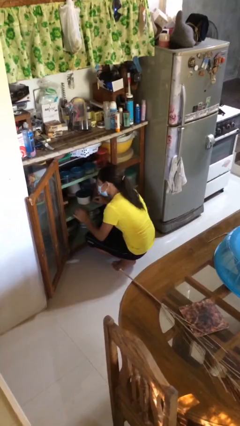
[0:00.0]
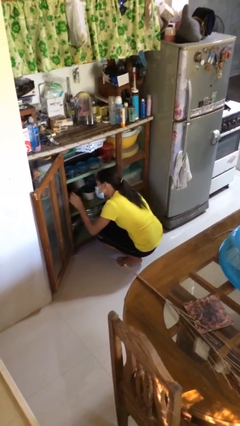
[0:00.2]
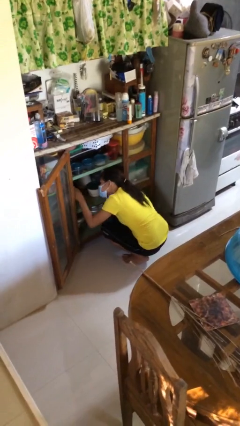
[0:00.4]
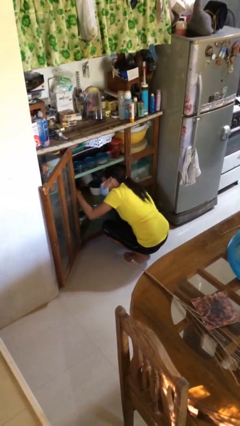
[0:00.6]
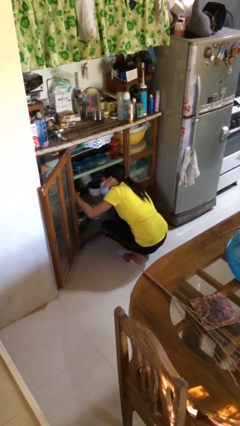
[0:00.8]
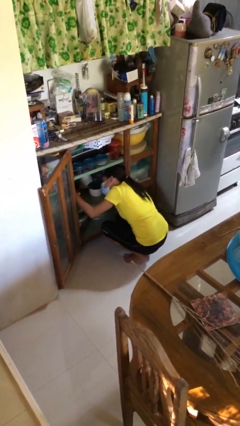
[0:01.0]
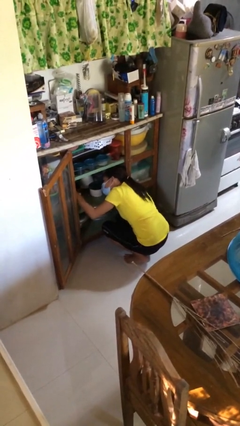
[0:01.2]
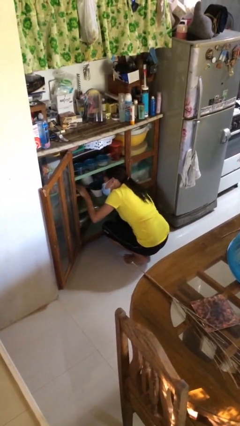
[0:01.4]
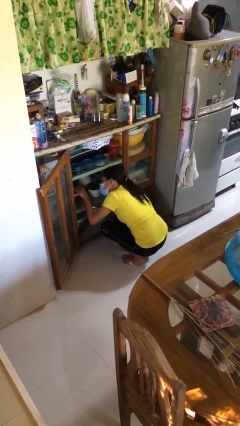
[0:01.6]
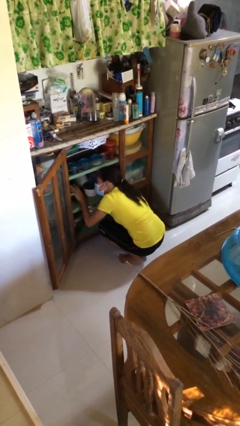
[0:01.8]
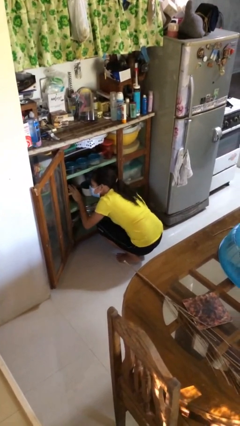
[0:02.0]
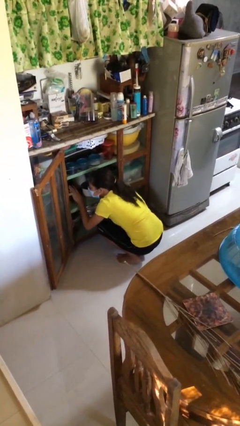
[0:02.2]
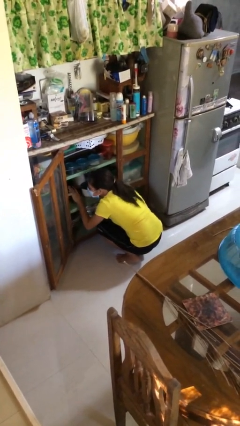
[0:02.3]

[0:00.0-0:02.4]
person searches in cabinet

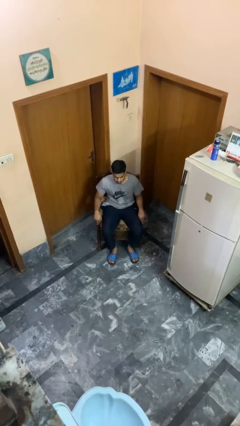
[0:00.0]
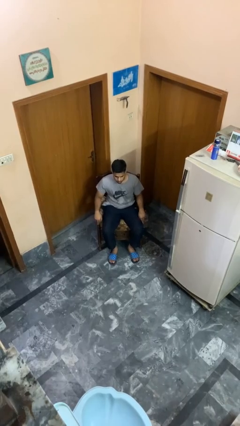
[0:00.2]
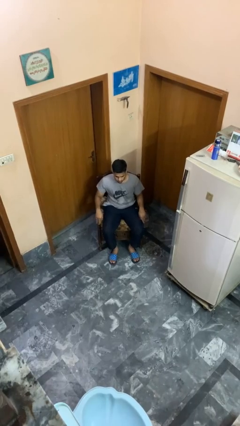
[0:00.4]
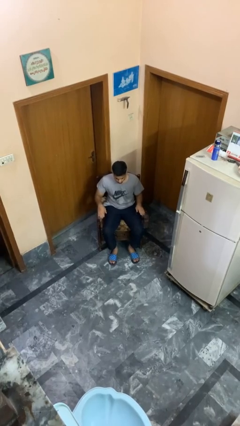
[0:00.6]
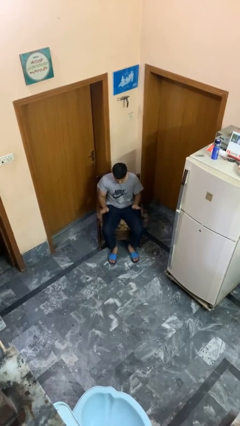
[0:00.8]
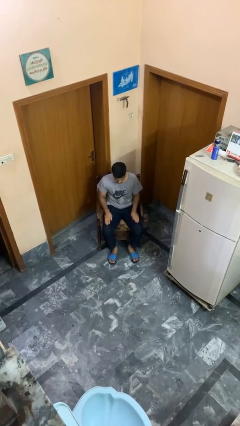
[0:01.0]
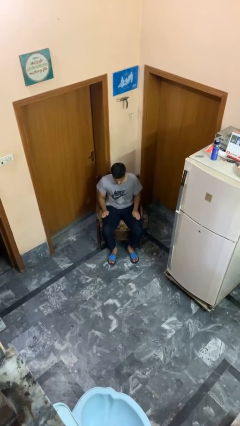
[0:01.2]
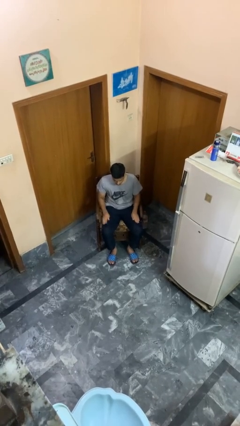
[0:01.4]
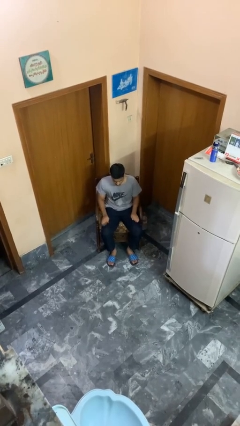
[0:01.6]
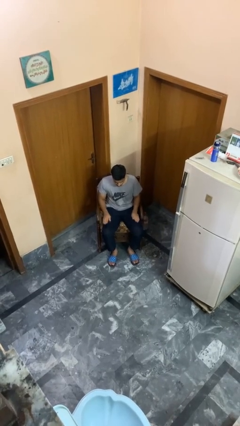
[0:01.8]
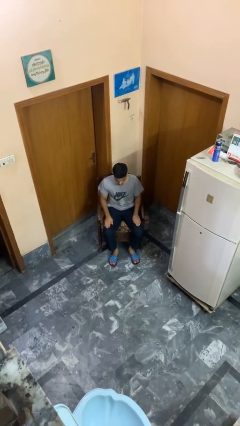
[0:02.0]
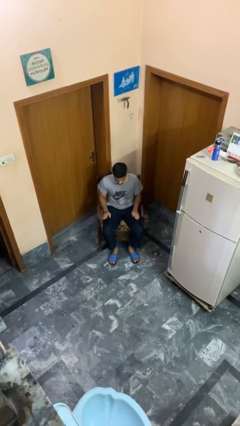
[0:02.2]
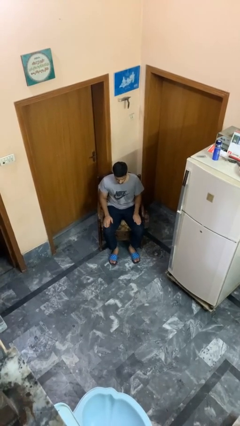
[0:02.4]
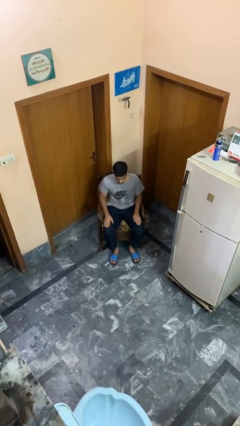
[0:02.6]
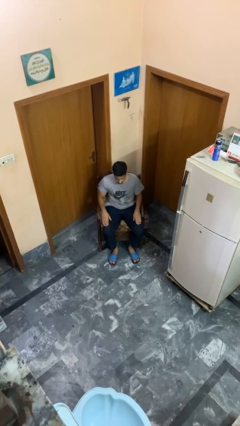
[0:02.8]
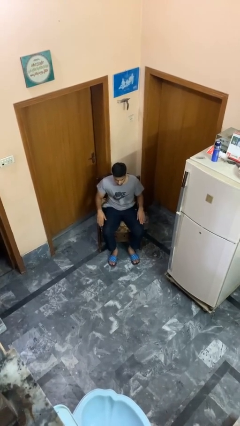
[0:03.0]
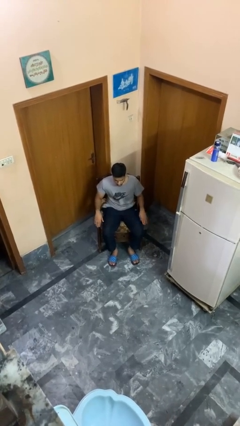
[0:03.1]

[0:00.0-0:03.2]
person slaps hands on thighs

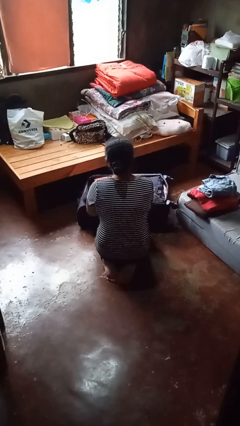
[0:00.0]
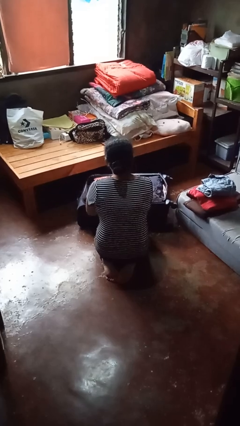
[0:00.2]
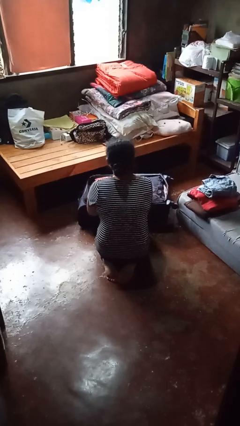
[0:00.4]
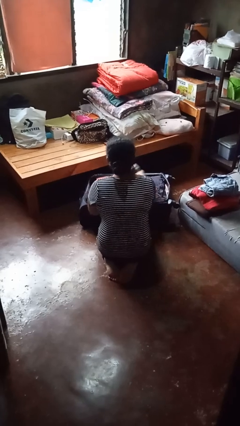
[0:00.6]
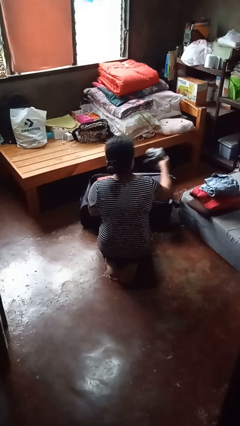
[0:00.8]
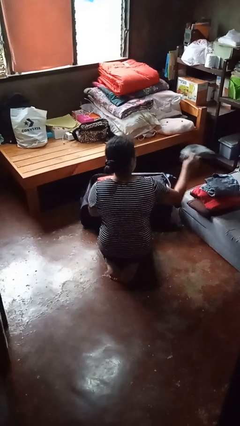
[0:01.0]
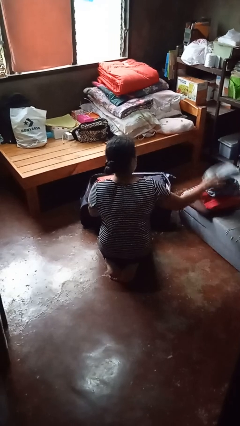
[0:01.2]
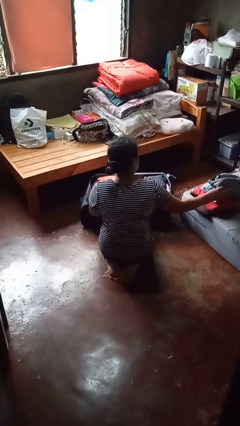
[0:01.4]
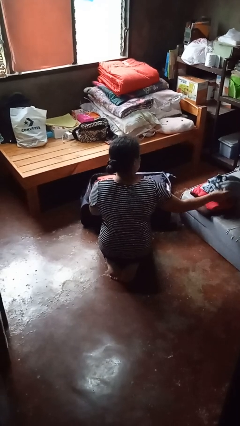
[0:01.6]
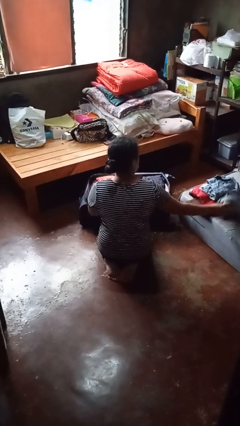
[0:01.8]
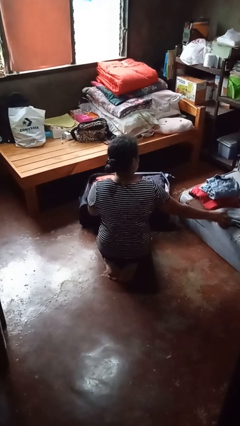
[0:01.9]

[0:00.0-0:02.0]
person unloads clothes from suitcase

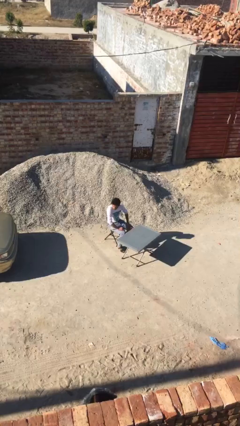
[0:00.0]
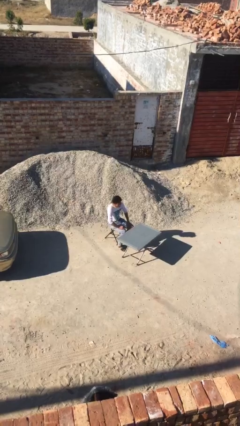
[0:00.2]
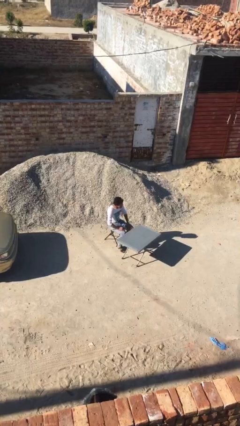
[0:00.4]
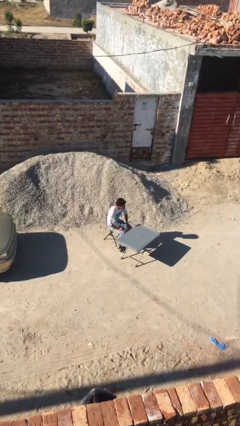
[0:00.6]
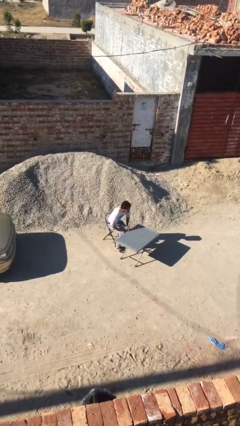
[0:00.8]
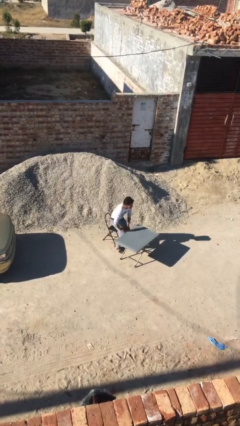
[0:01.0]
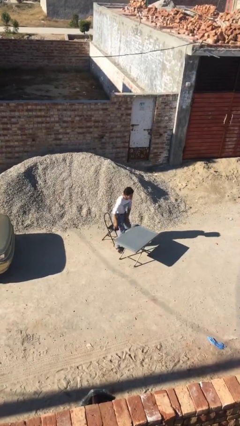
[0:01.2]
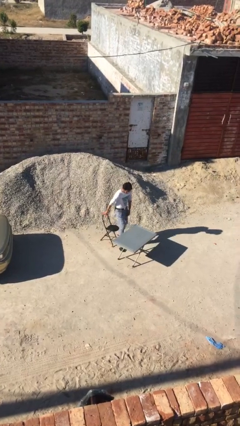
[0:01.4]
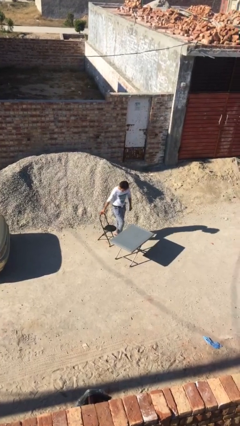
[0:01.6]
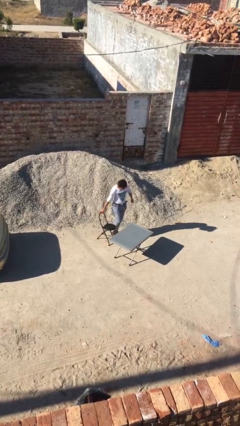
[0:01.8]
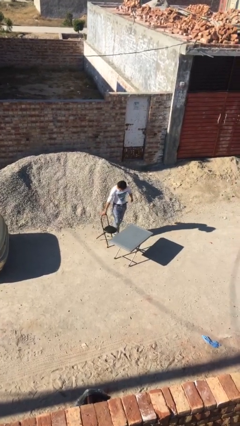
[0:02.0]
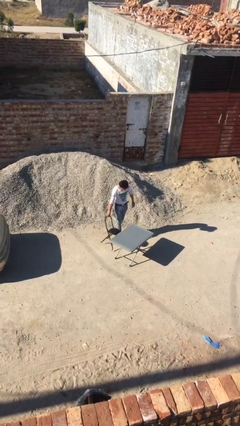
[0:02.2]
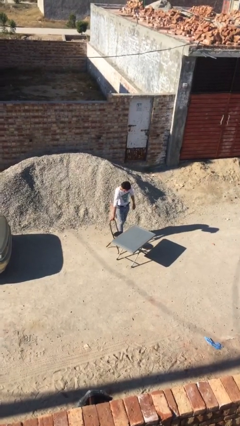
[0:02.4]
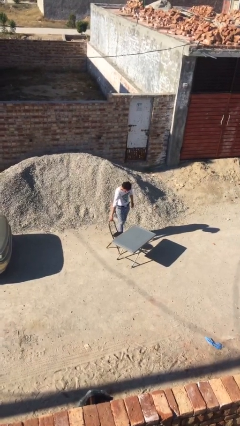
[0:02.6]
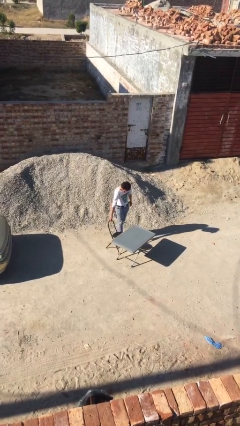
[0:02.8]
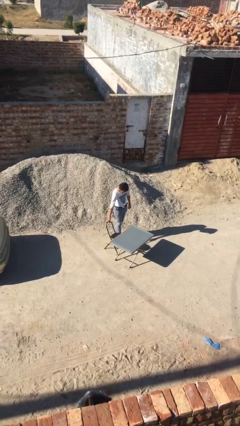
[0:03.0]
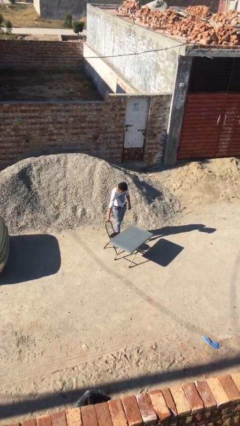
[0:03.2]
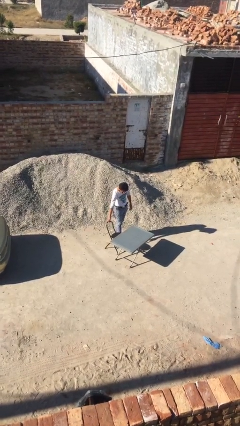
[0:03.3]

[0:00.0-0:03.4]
person stands up

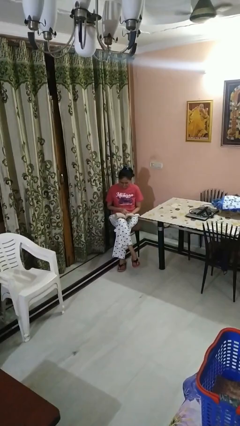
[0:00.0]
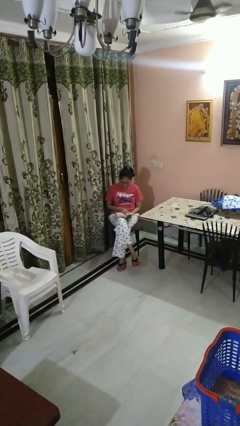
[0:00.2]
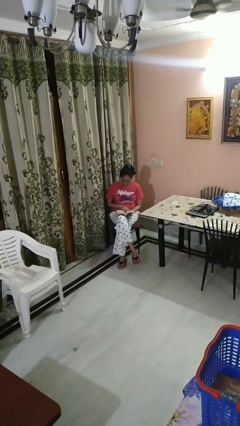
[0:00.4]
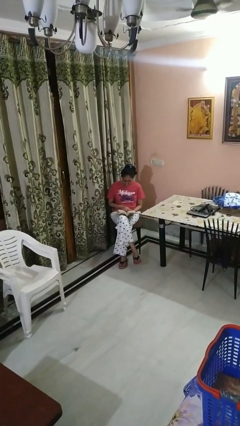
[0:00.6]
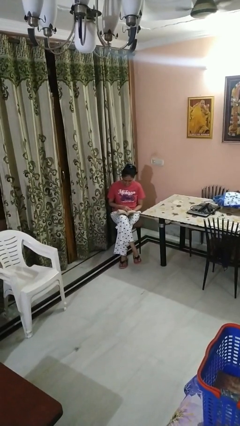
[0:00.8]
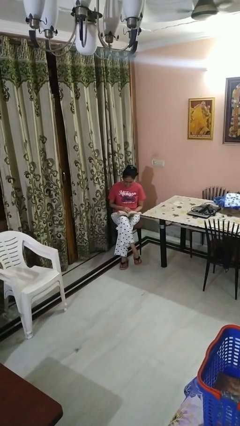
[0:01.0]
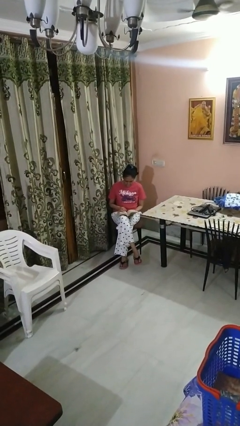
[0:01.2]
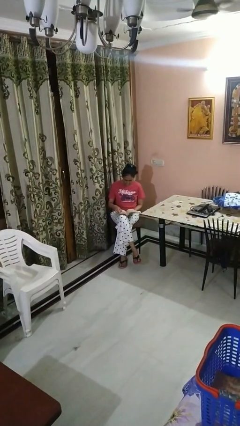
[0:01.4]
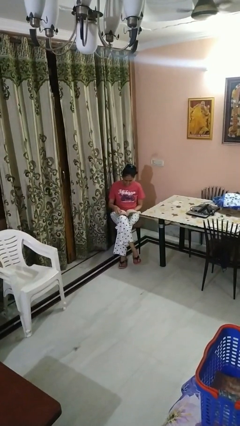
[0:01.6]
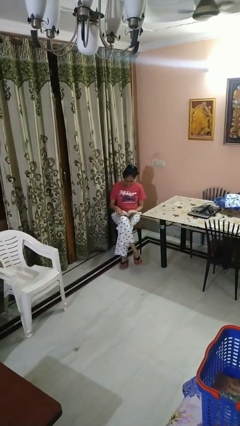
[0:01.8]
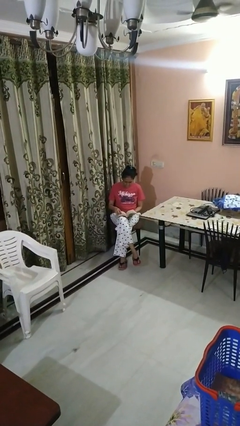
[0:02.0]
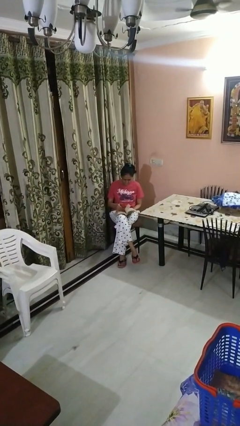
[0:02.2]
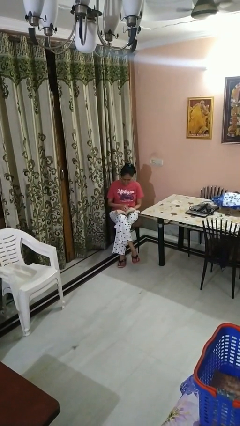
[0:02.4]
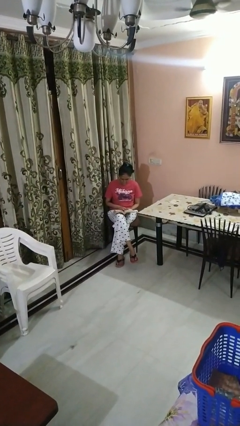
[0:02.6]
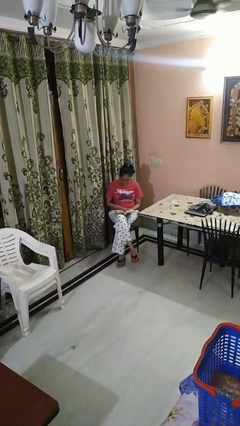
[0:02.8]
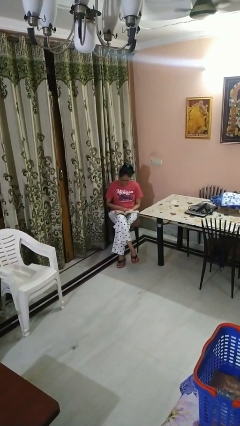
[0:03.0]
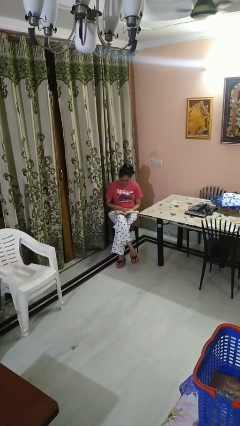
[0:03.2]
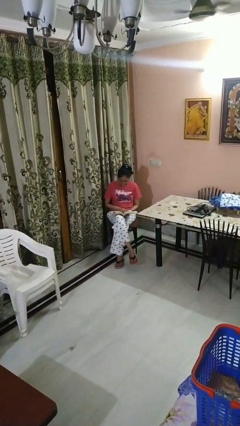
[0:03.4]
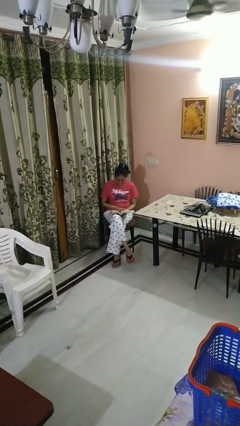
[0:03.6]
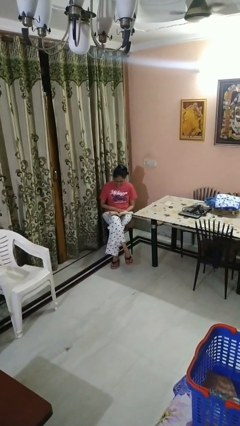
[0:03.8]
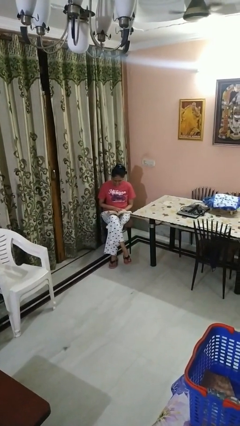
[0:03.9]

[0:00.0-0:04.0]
person reads book

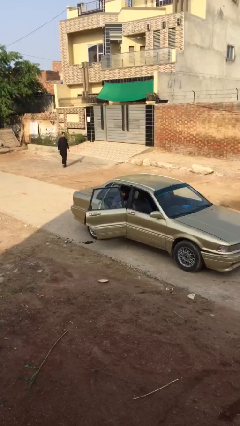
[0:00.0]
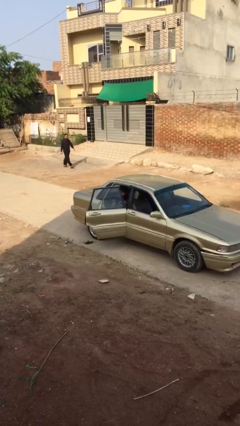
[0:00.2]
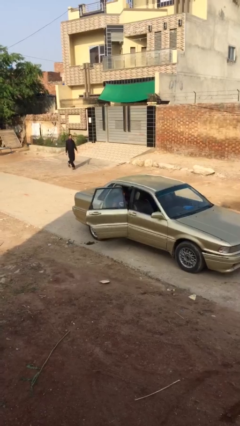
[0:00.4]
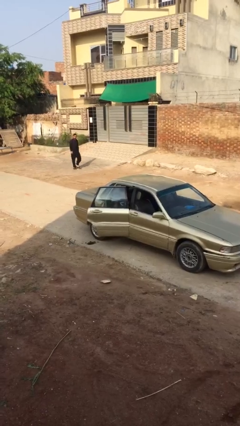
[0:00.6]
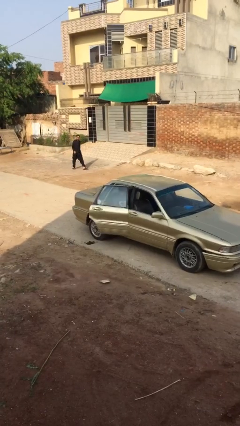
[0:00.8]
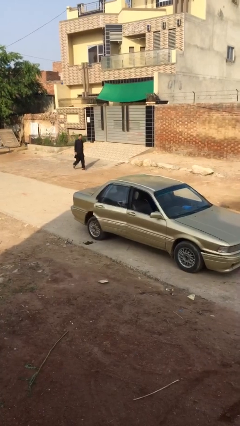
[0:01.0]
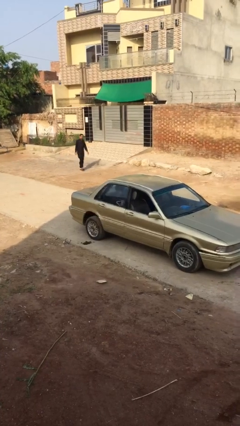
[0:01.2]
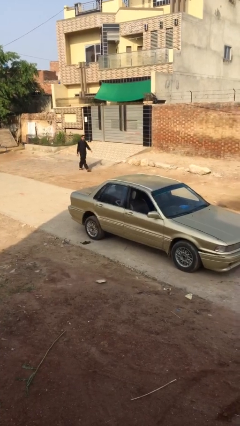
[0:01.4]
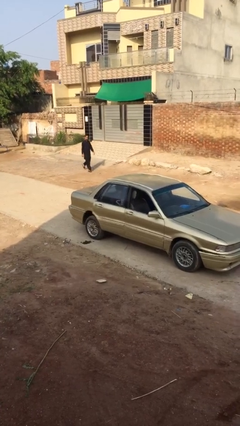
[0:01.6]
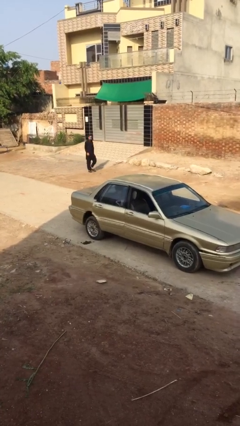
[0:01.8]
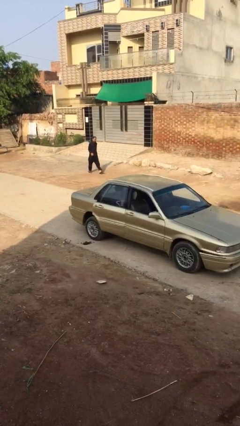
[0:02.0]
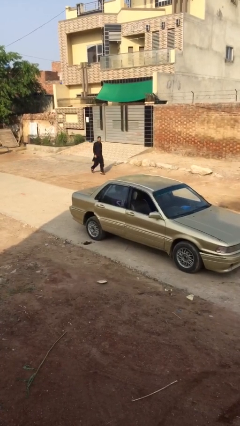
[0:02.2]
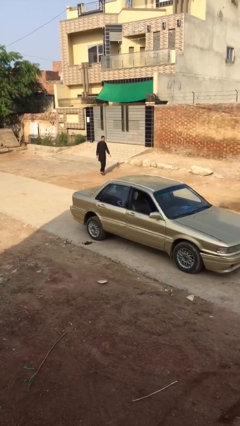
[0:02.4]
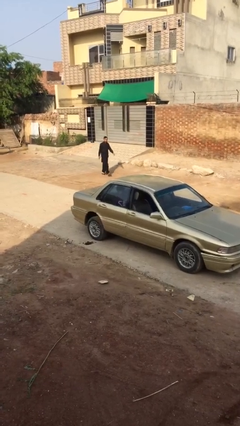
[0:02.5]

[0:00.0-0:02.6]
person closes car door
